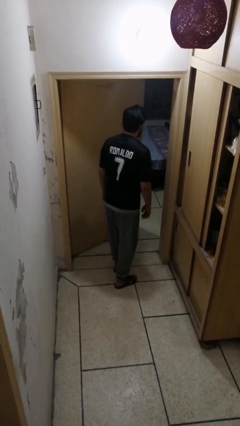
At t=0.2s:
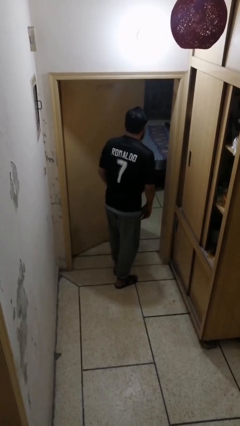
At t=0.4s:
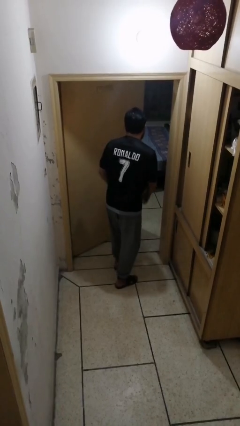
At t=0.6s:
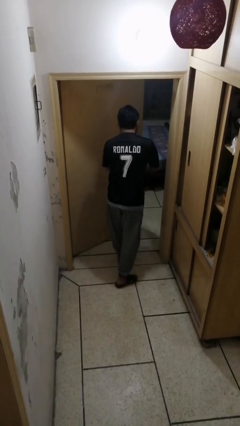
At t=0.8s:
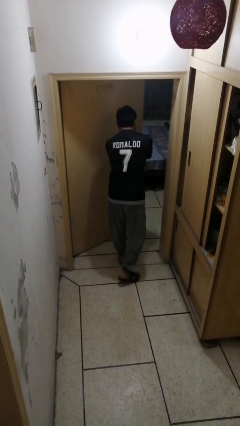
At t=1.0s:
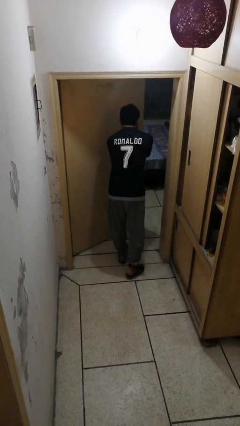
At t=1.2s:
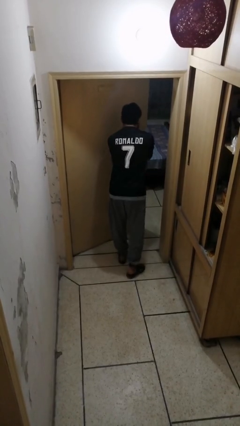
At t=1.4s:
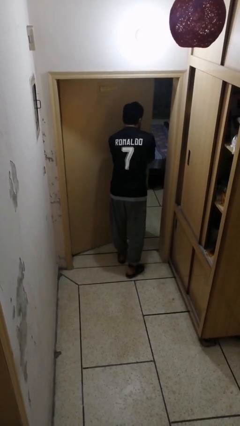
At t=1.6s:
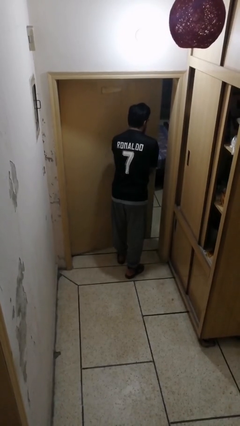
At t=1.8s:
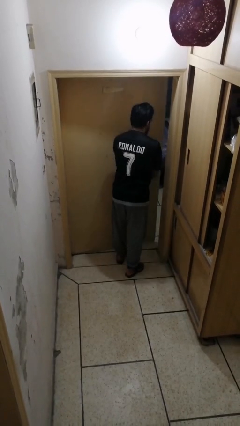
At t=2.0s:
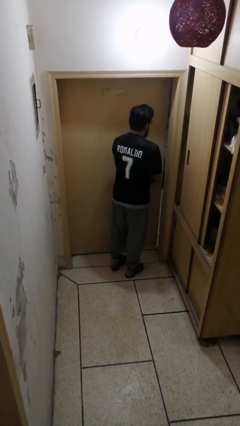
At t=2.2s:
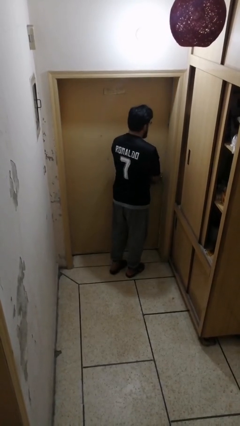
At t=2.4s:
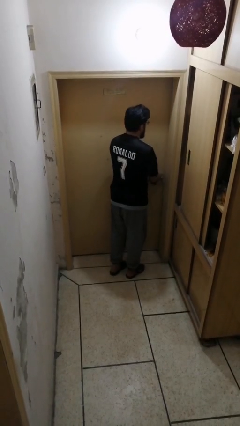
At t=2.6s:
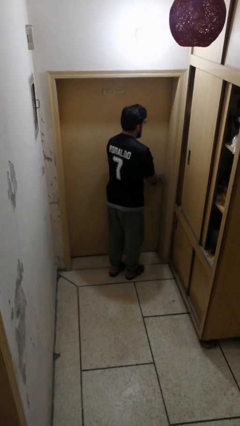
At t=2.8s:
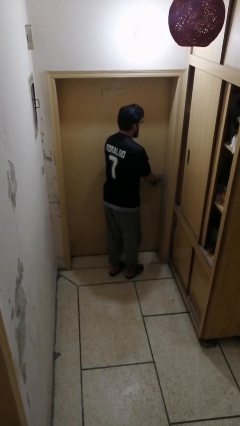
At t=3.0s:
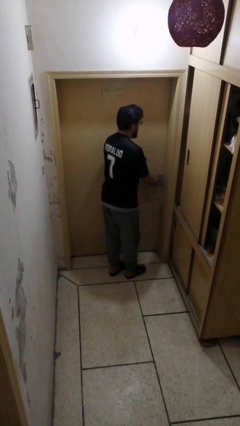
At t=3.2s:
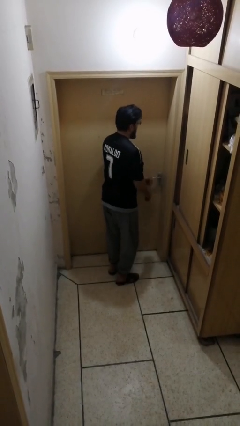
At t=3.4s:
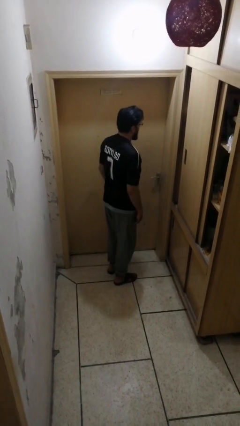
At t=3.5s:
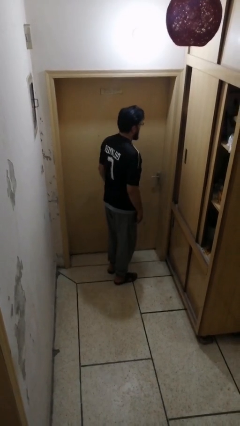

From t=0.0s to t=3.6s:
person closes facility door

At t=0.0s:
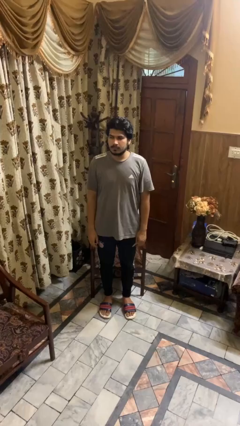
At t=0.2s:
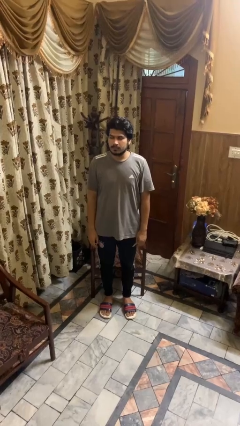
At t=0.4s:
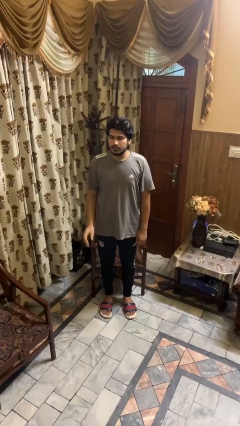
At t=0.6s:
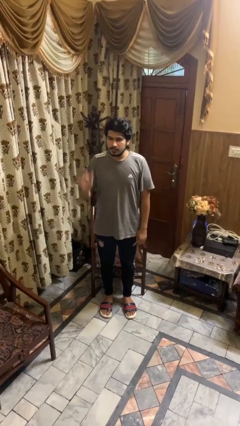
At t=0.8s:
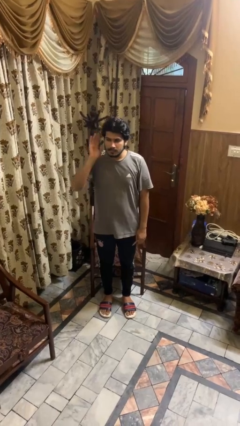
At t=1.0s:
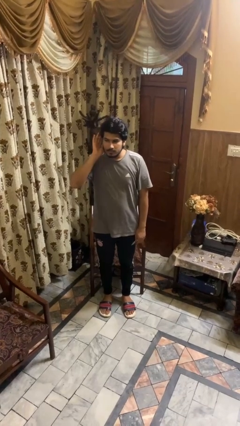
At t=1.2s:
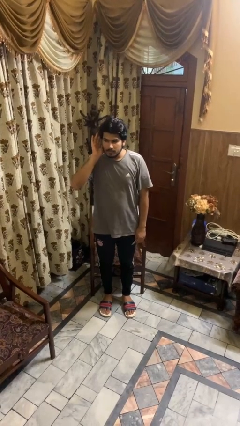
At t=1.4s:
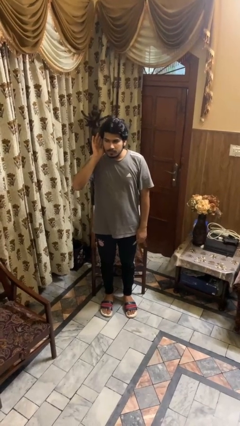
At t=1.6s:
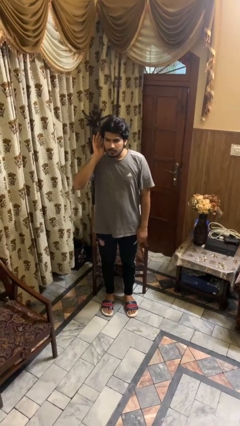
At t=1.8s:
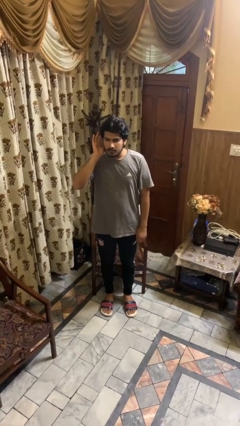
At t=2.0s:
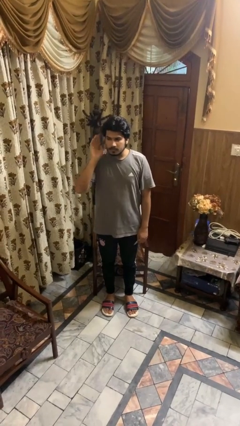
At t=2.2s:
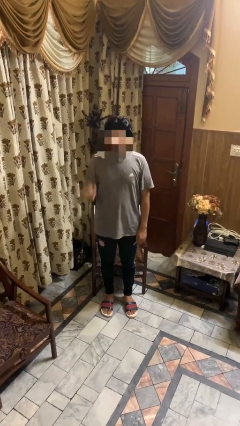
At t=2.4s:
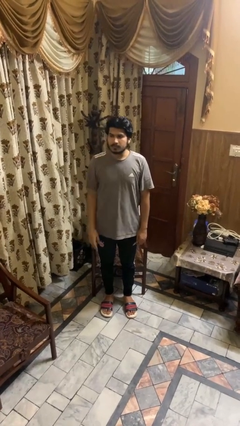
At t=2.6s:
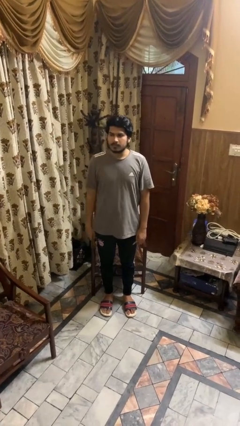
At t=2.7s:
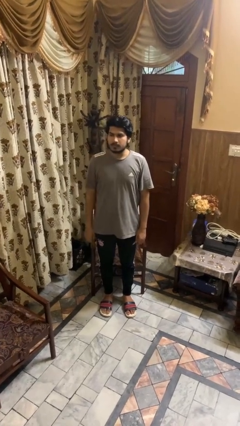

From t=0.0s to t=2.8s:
person gestures listen closely

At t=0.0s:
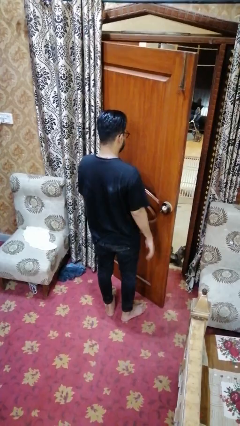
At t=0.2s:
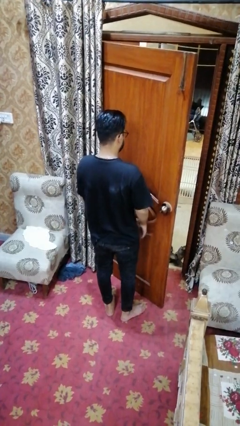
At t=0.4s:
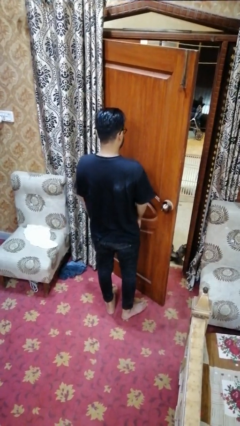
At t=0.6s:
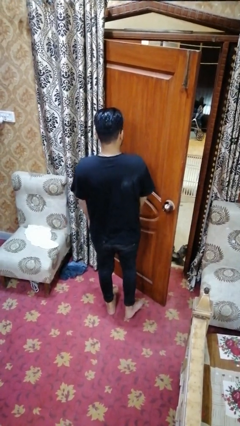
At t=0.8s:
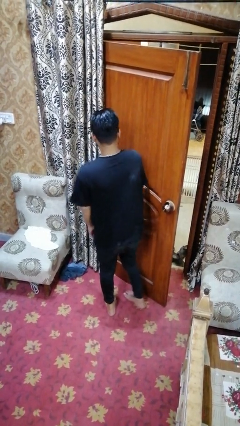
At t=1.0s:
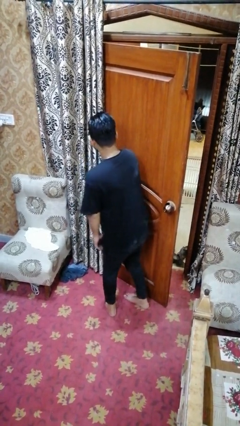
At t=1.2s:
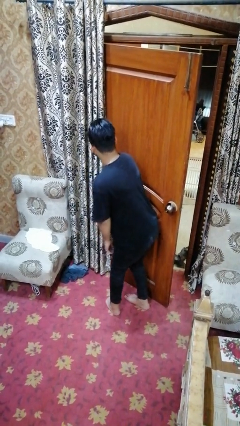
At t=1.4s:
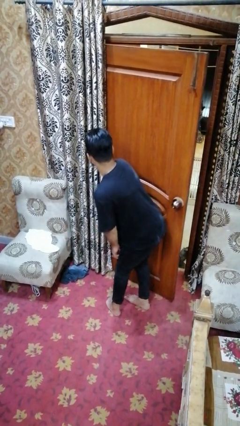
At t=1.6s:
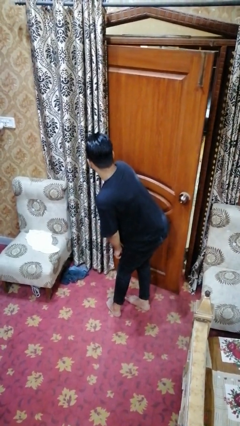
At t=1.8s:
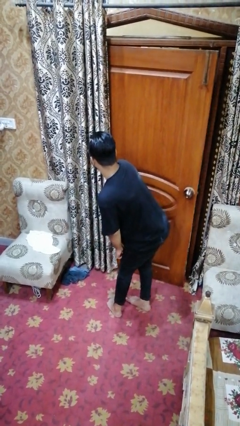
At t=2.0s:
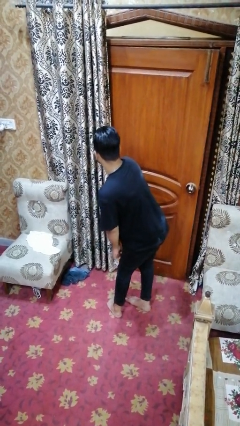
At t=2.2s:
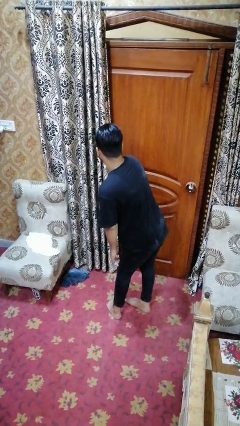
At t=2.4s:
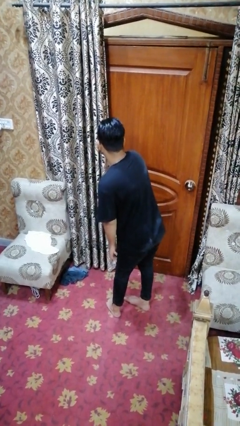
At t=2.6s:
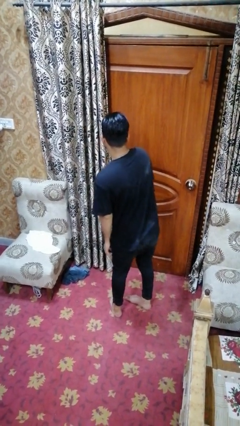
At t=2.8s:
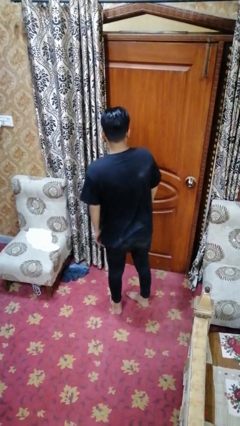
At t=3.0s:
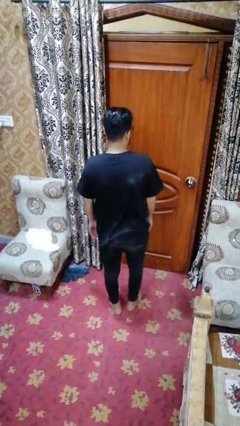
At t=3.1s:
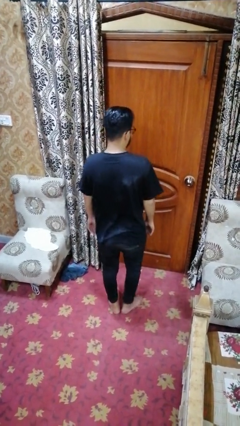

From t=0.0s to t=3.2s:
person closes door with hip

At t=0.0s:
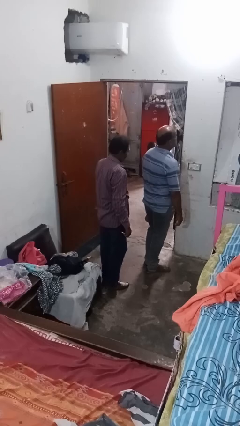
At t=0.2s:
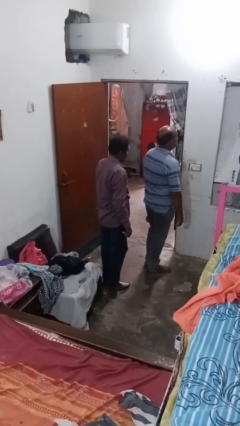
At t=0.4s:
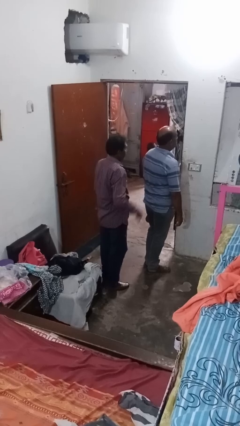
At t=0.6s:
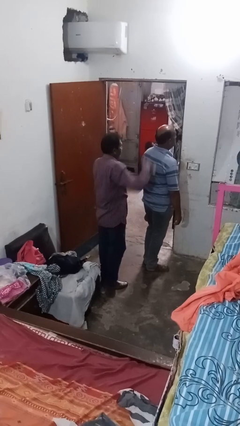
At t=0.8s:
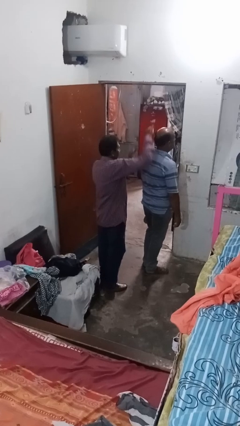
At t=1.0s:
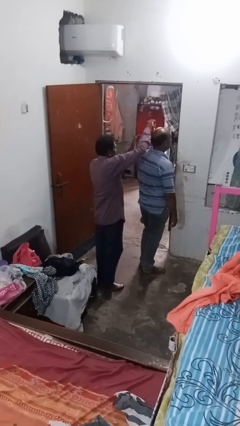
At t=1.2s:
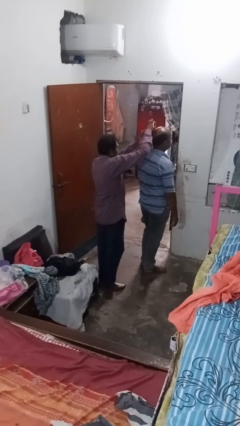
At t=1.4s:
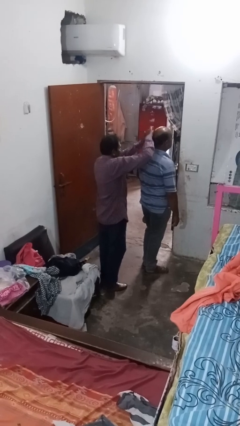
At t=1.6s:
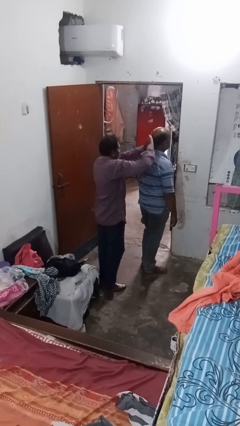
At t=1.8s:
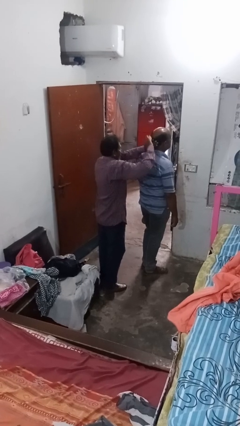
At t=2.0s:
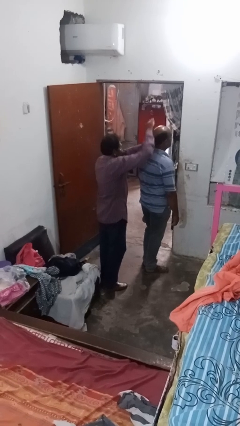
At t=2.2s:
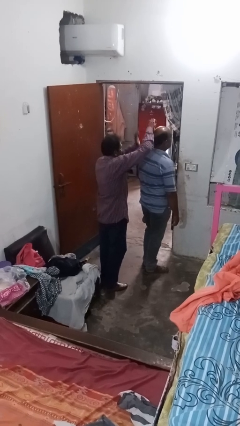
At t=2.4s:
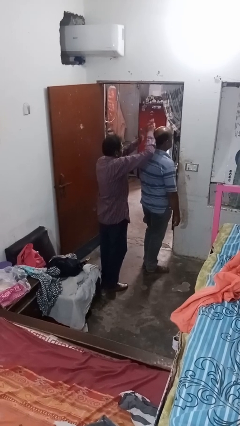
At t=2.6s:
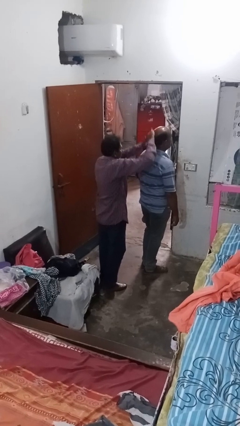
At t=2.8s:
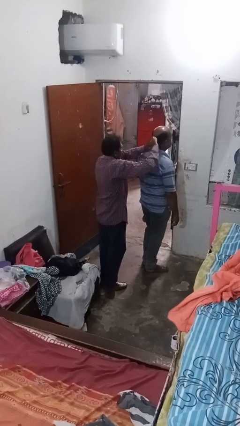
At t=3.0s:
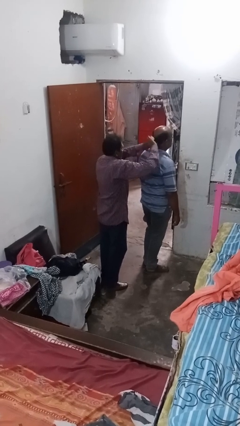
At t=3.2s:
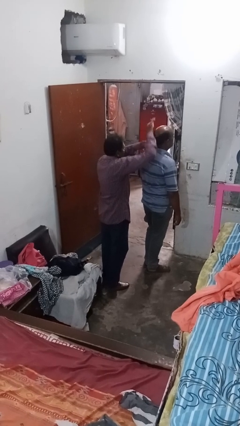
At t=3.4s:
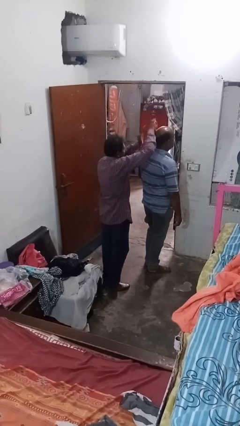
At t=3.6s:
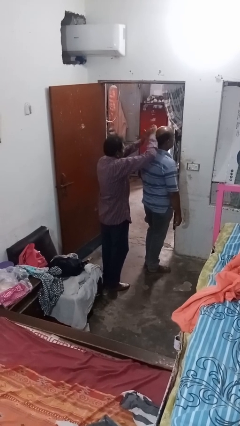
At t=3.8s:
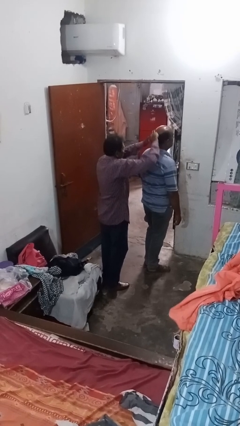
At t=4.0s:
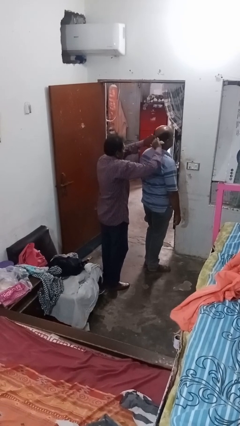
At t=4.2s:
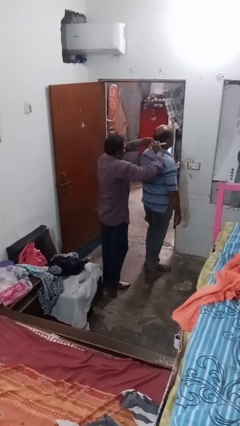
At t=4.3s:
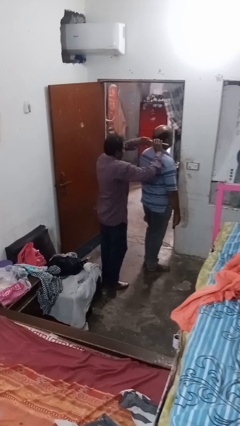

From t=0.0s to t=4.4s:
person brushes hair of person

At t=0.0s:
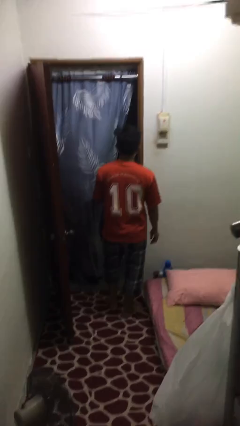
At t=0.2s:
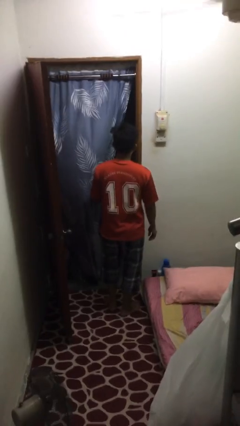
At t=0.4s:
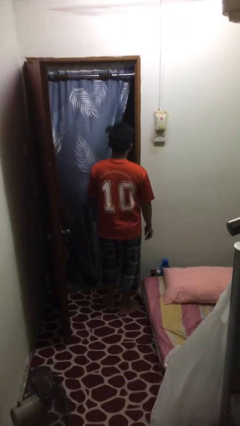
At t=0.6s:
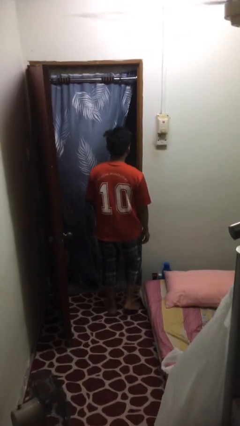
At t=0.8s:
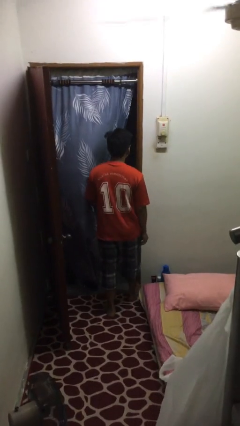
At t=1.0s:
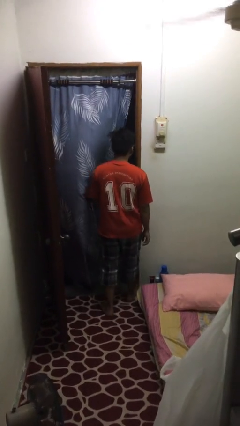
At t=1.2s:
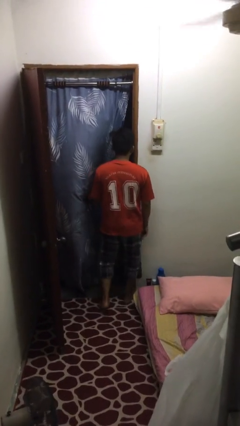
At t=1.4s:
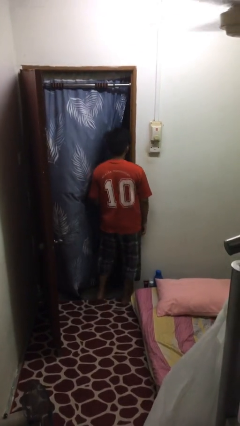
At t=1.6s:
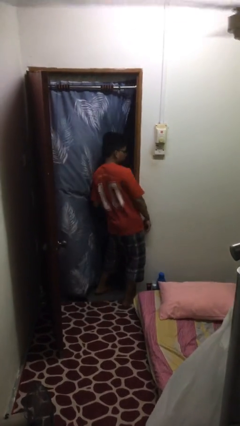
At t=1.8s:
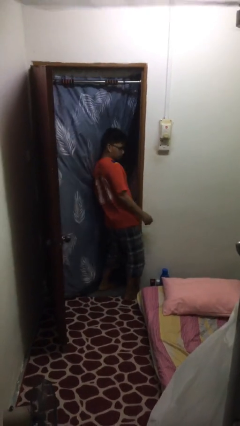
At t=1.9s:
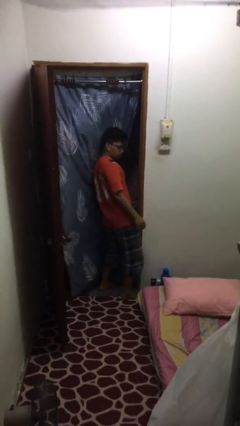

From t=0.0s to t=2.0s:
person bumps into wall

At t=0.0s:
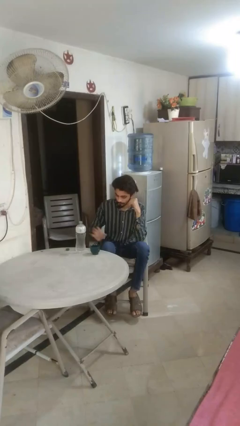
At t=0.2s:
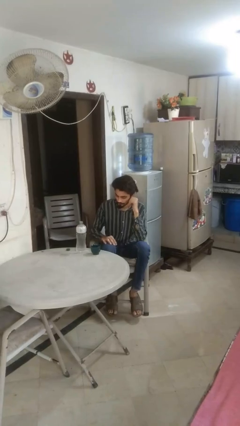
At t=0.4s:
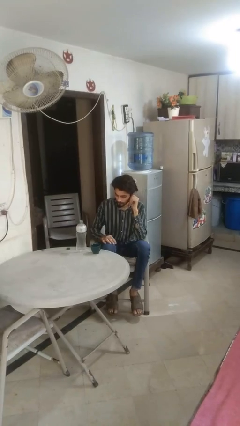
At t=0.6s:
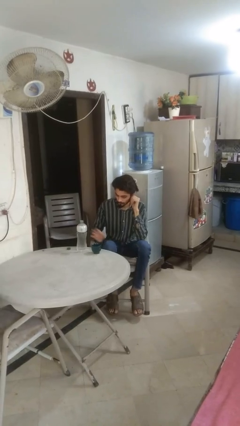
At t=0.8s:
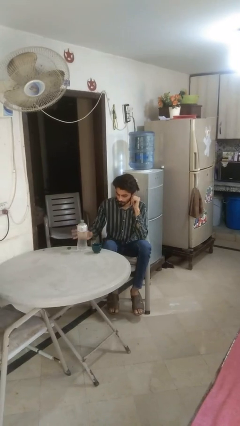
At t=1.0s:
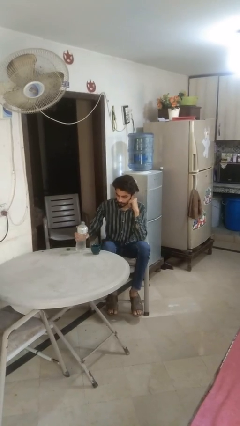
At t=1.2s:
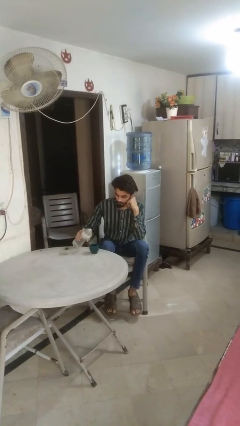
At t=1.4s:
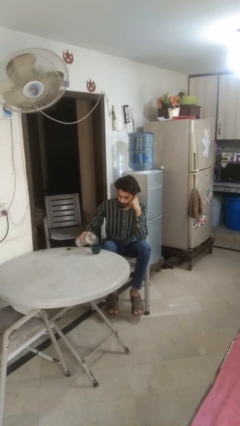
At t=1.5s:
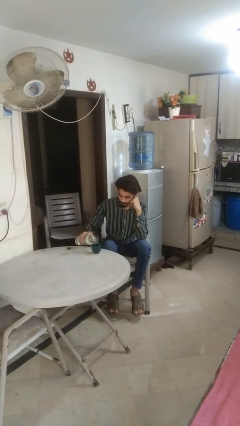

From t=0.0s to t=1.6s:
person pours liquid into cup
